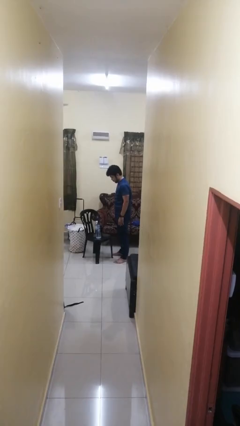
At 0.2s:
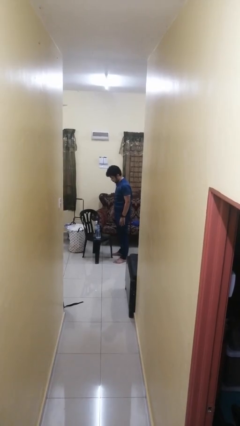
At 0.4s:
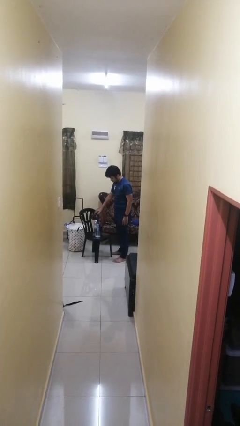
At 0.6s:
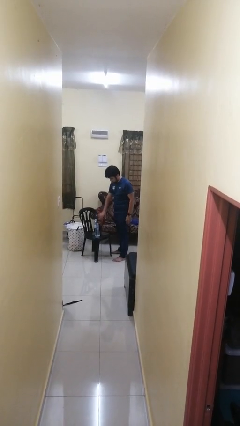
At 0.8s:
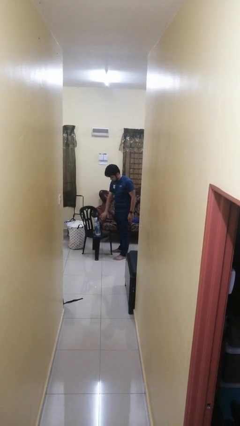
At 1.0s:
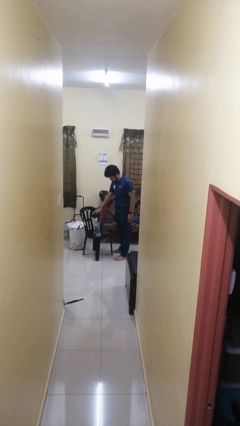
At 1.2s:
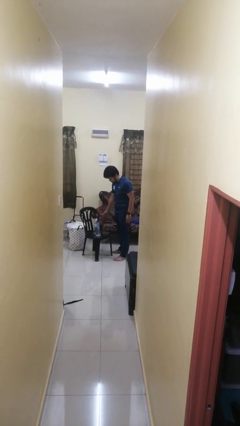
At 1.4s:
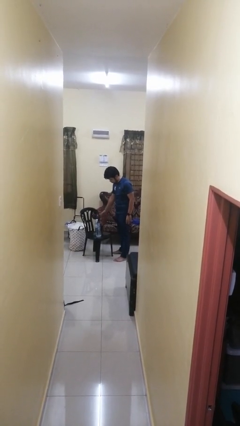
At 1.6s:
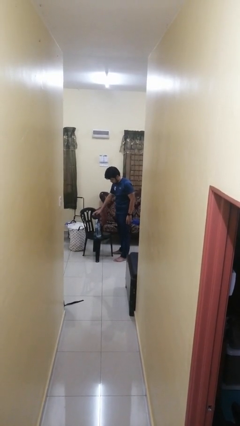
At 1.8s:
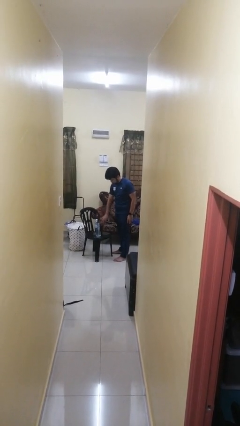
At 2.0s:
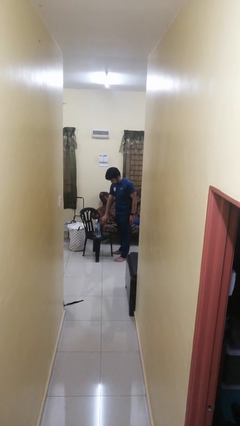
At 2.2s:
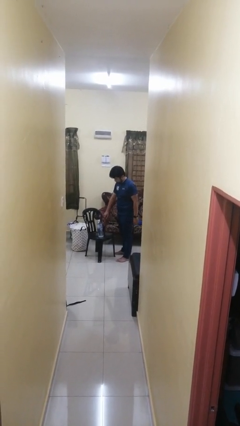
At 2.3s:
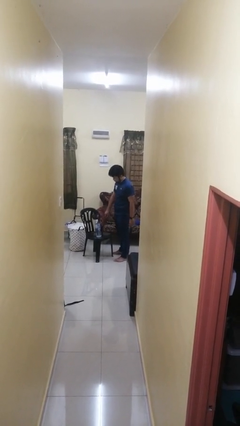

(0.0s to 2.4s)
person waves hand over object

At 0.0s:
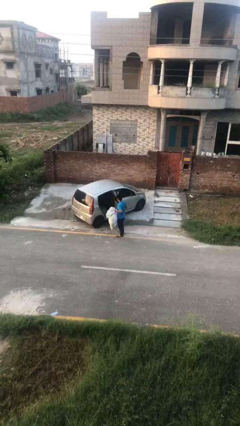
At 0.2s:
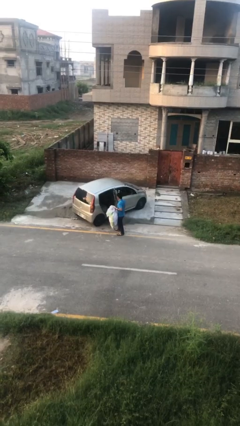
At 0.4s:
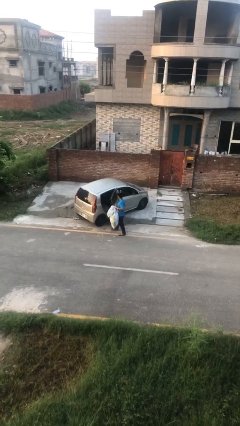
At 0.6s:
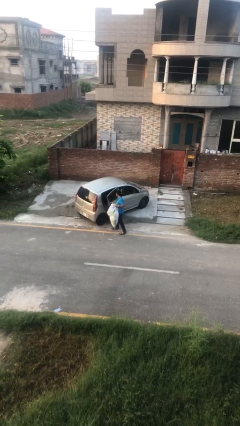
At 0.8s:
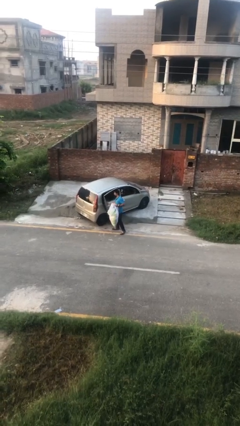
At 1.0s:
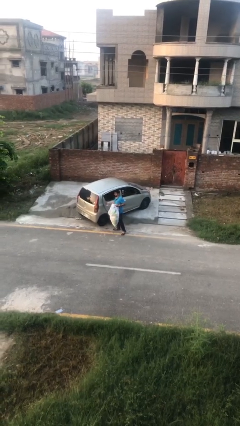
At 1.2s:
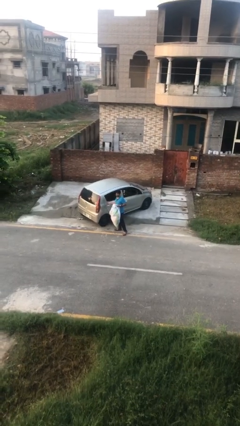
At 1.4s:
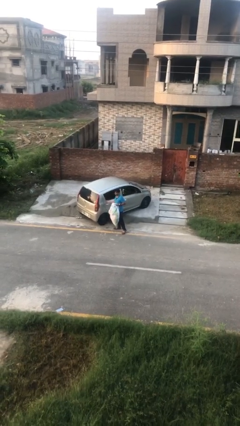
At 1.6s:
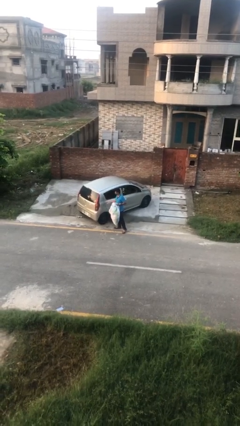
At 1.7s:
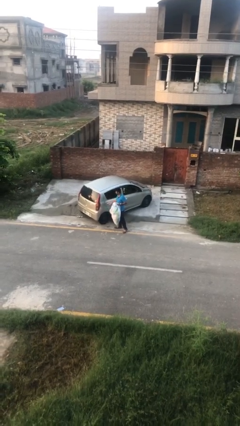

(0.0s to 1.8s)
person closes car door

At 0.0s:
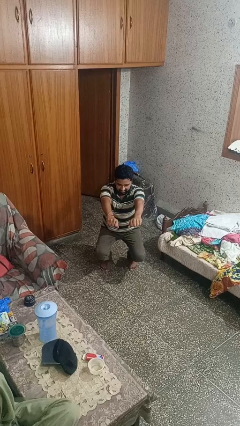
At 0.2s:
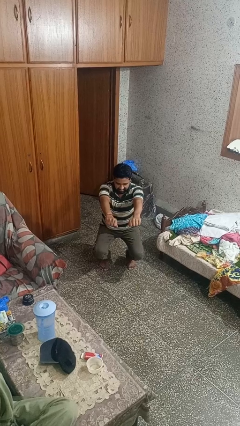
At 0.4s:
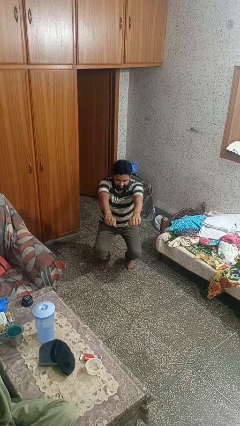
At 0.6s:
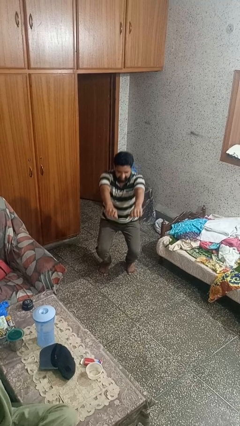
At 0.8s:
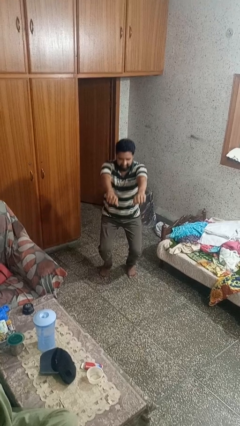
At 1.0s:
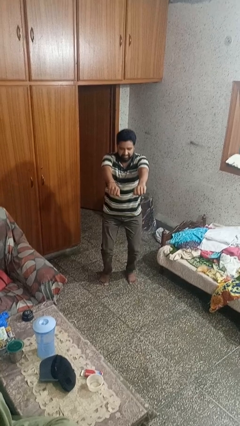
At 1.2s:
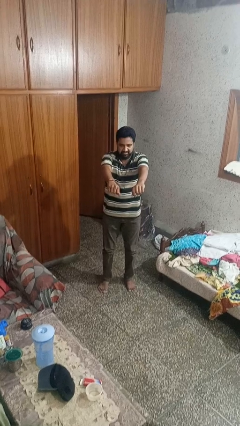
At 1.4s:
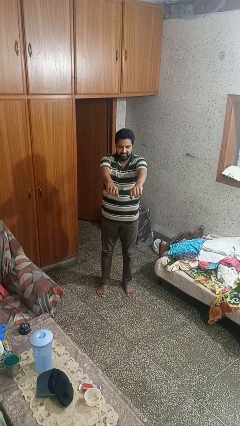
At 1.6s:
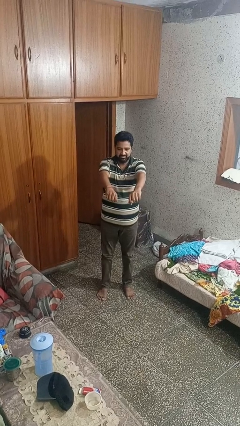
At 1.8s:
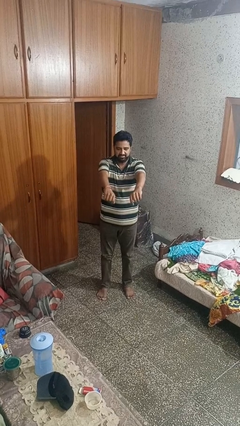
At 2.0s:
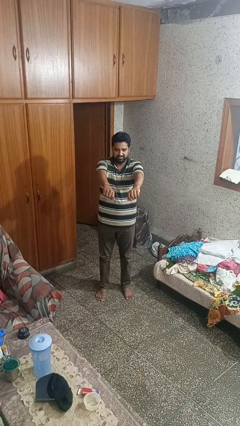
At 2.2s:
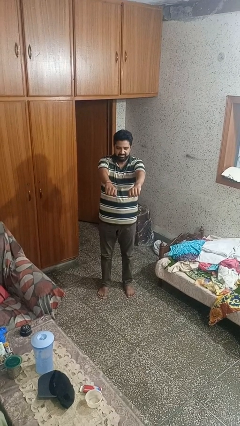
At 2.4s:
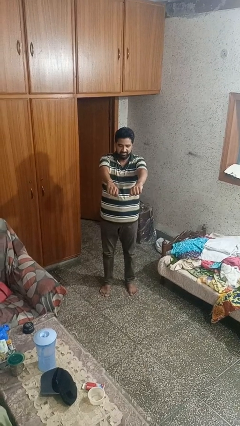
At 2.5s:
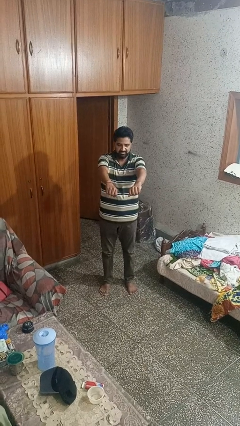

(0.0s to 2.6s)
person stands up

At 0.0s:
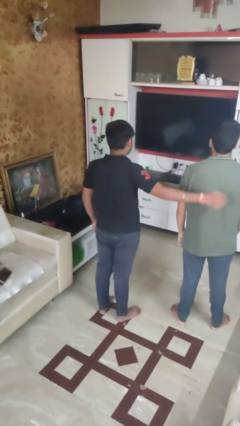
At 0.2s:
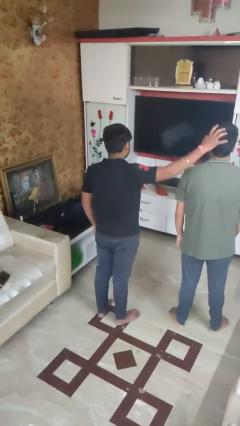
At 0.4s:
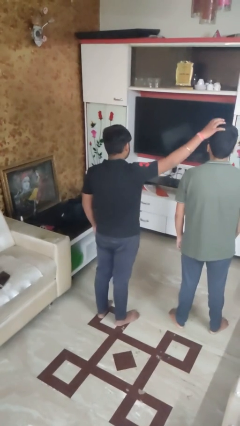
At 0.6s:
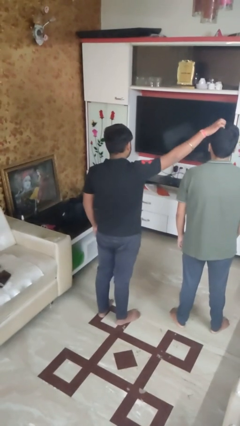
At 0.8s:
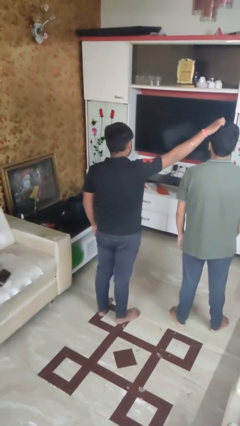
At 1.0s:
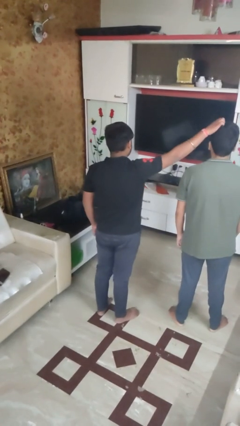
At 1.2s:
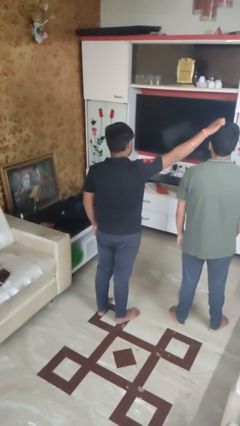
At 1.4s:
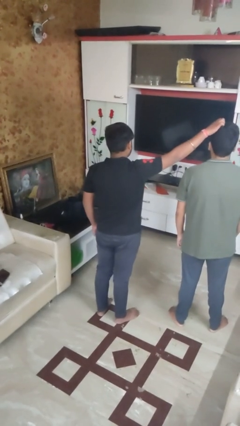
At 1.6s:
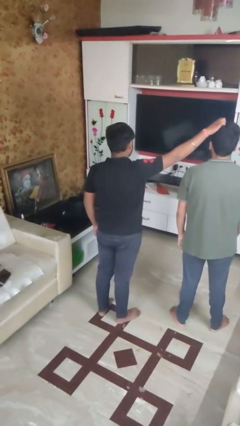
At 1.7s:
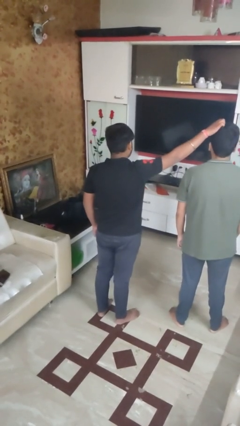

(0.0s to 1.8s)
person grabs person by hair

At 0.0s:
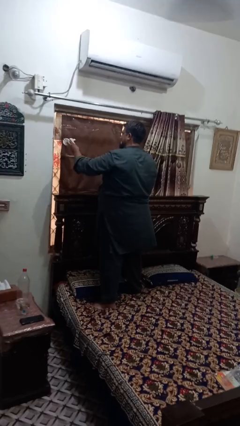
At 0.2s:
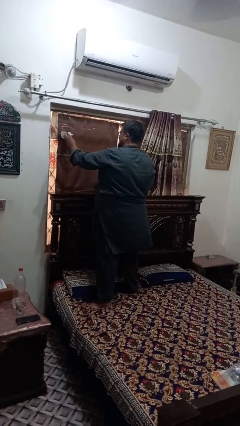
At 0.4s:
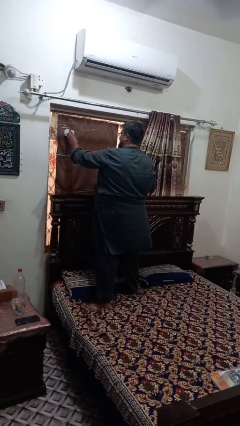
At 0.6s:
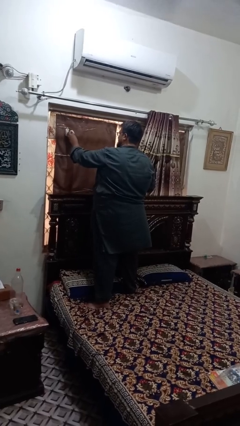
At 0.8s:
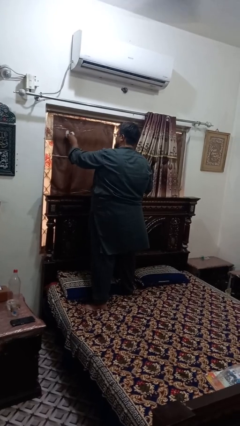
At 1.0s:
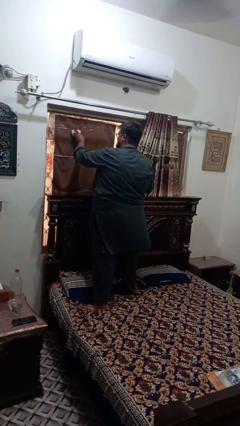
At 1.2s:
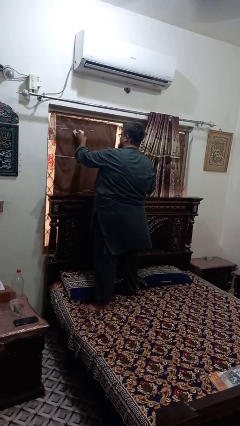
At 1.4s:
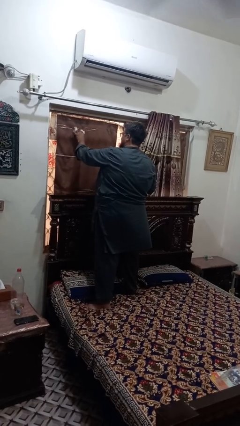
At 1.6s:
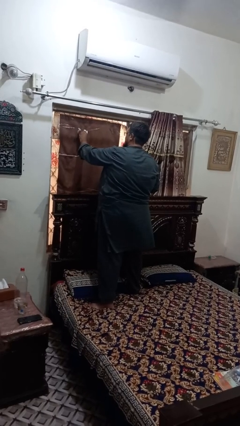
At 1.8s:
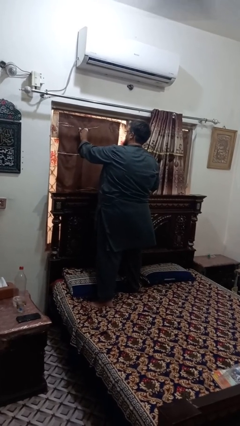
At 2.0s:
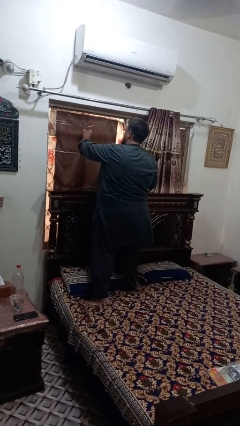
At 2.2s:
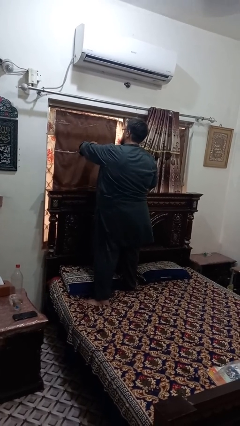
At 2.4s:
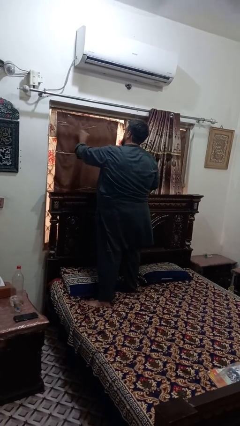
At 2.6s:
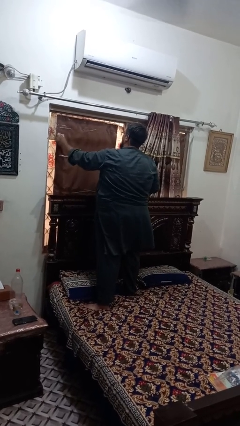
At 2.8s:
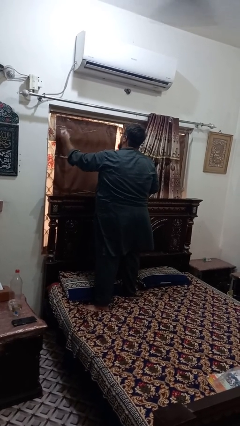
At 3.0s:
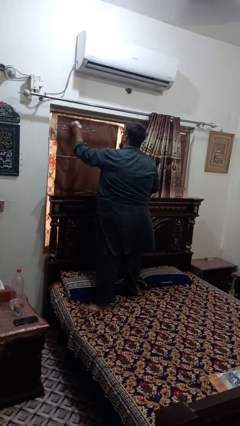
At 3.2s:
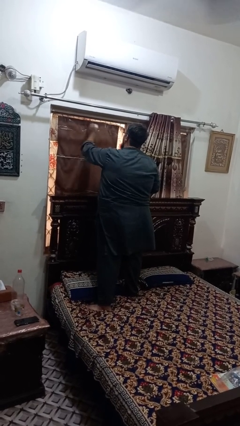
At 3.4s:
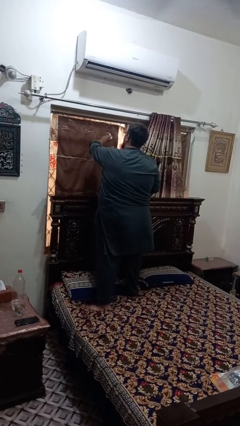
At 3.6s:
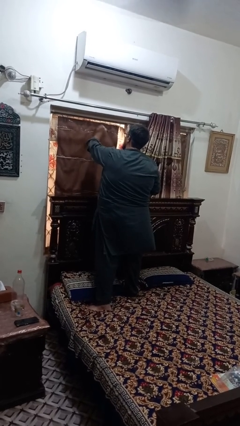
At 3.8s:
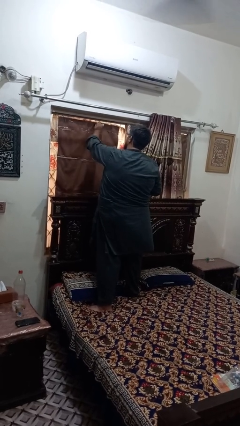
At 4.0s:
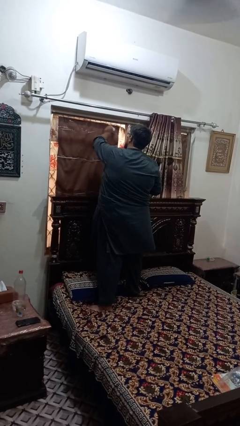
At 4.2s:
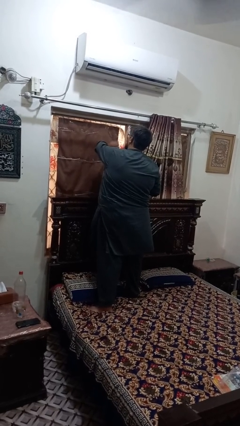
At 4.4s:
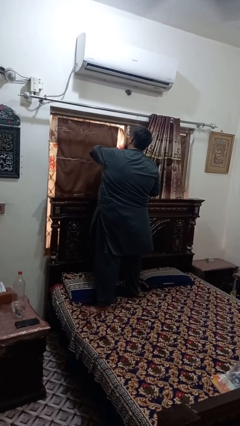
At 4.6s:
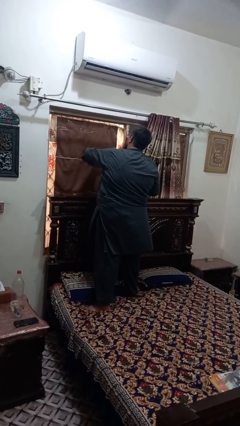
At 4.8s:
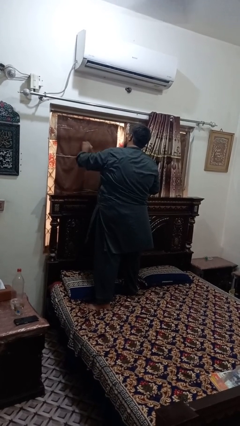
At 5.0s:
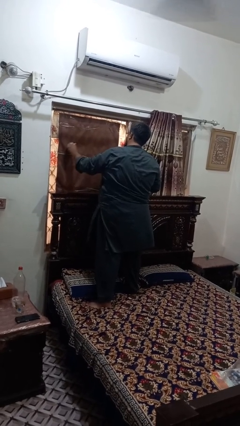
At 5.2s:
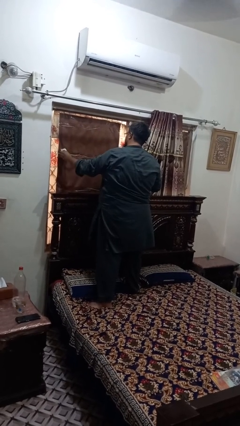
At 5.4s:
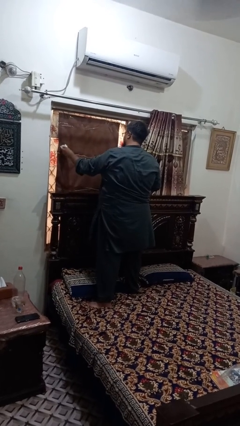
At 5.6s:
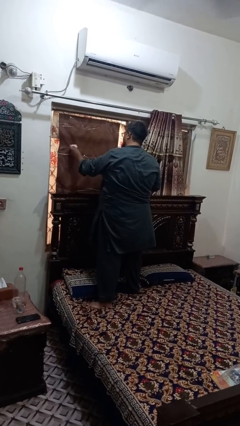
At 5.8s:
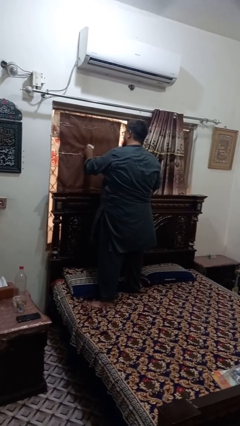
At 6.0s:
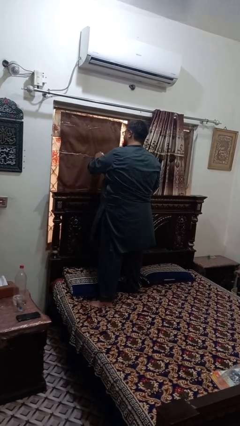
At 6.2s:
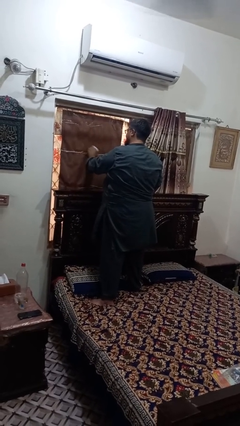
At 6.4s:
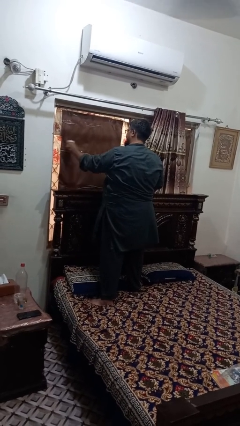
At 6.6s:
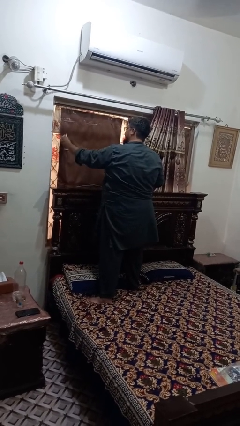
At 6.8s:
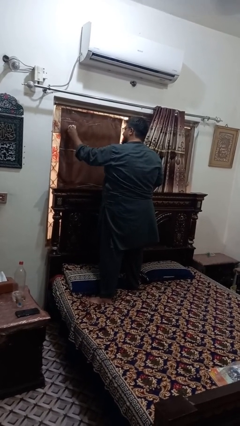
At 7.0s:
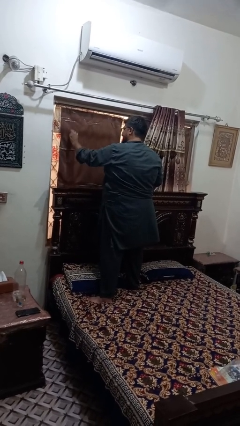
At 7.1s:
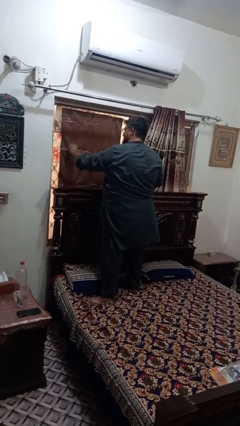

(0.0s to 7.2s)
person washes window

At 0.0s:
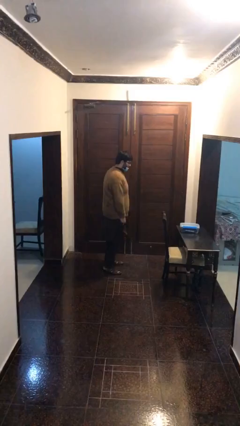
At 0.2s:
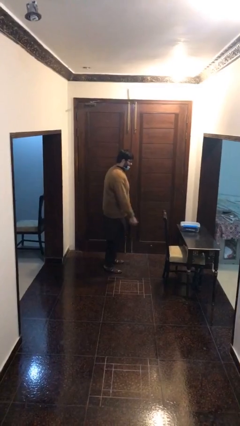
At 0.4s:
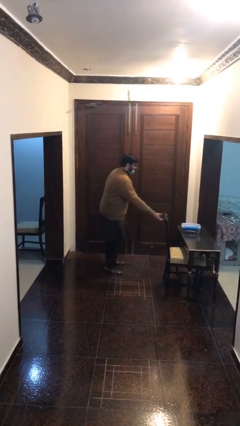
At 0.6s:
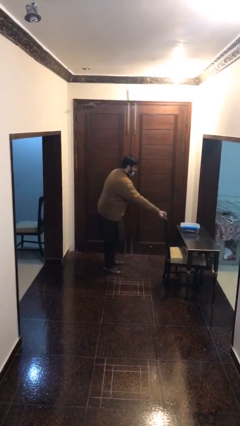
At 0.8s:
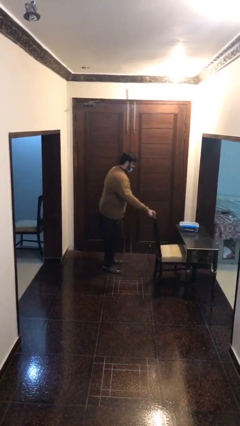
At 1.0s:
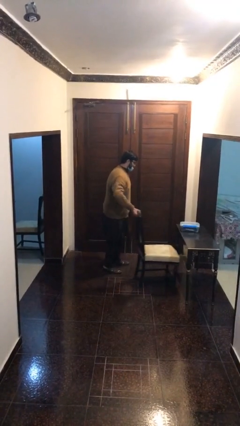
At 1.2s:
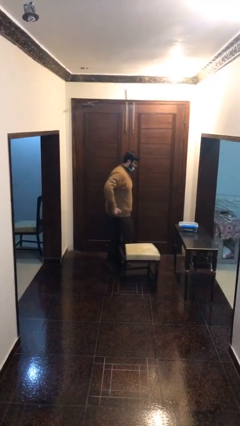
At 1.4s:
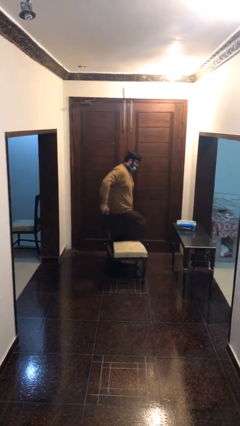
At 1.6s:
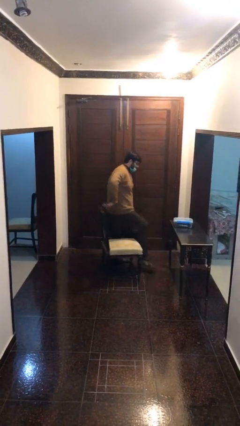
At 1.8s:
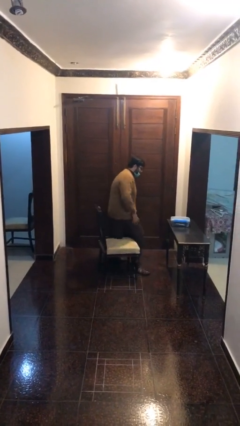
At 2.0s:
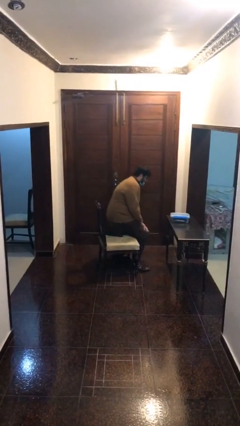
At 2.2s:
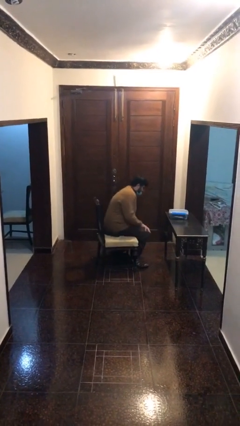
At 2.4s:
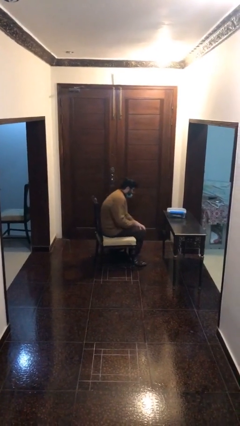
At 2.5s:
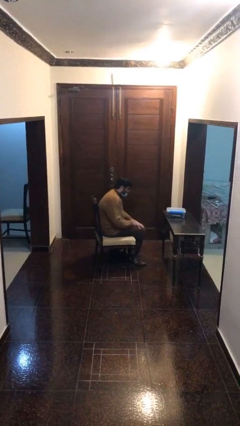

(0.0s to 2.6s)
person sits down
